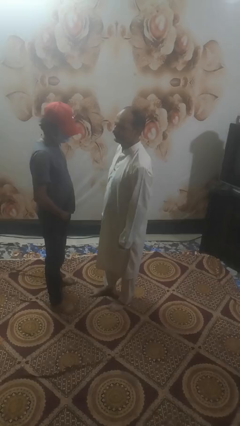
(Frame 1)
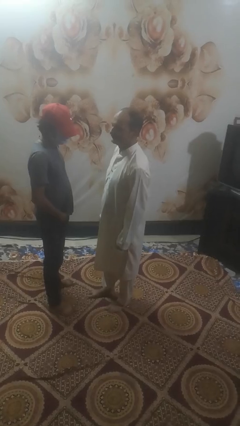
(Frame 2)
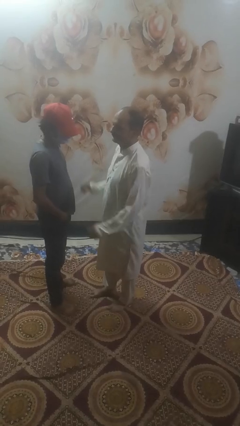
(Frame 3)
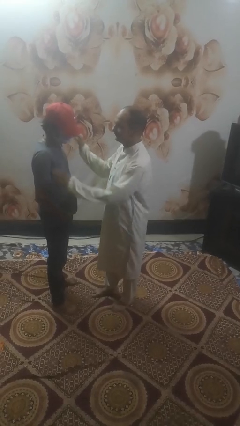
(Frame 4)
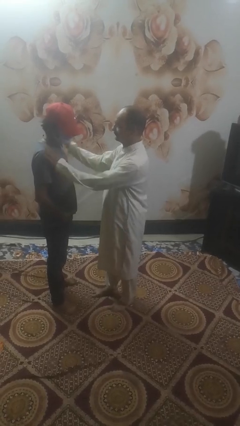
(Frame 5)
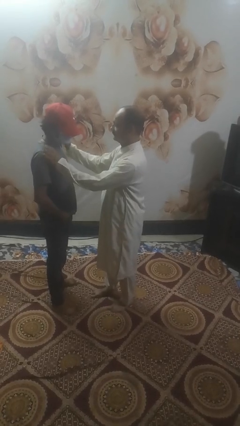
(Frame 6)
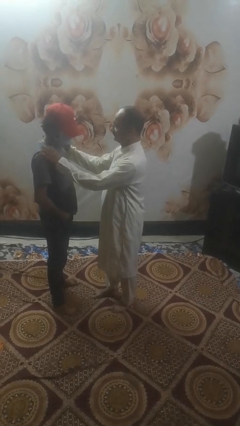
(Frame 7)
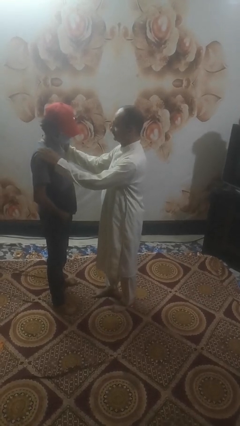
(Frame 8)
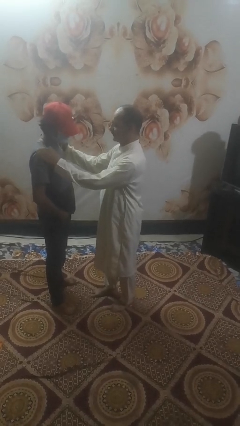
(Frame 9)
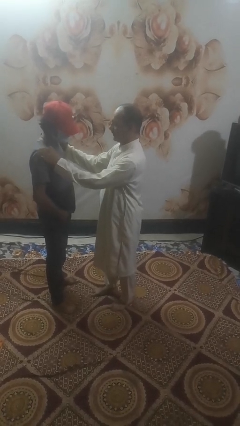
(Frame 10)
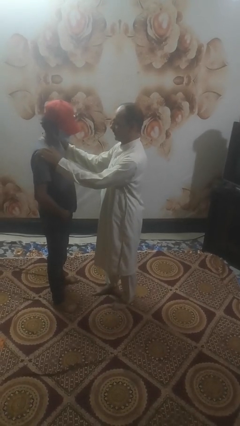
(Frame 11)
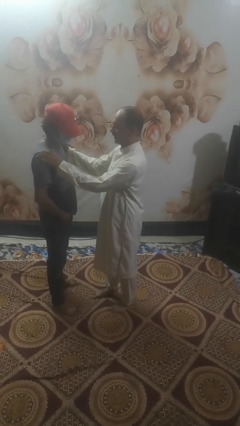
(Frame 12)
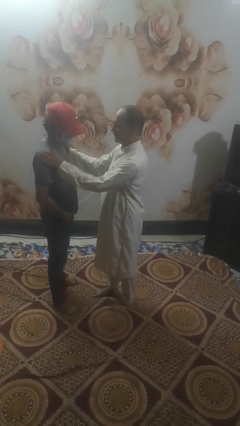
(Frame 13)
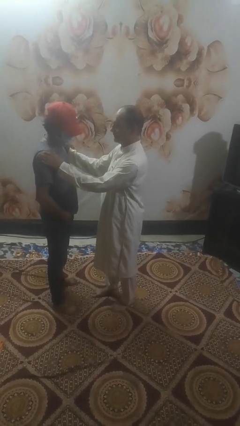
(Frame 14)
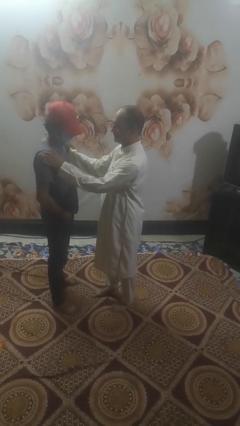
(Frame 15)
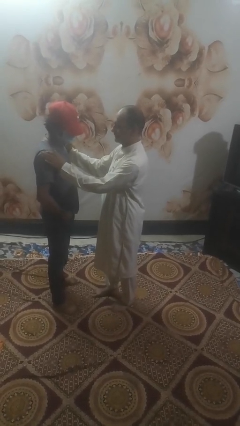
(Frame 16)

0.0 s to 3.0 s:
person pounds shoulders of person

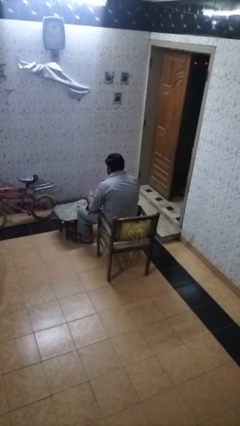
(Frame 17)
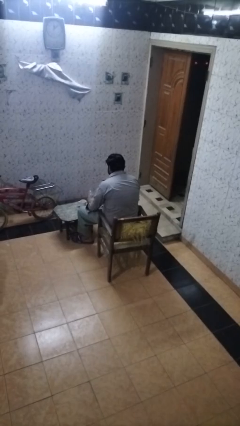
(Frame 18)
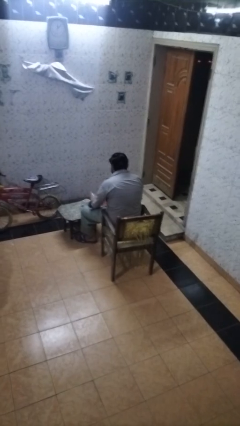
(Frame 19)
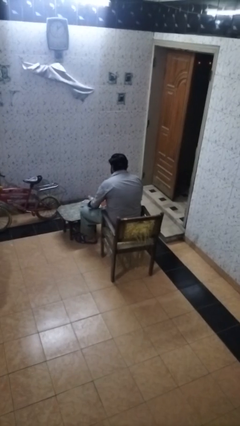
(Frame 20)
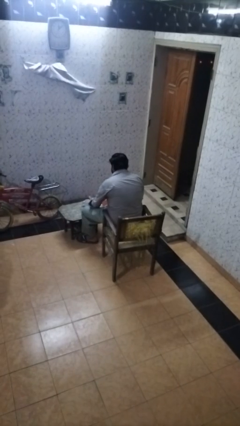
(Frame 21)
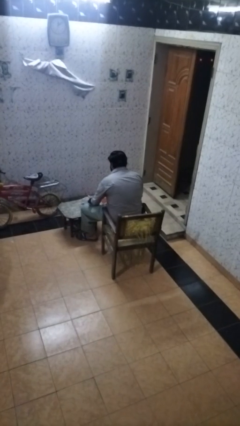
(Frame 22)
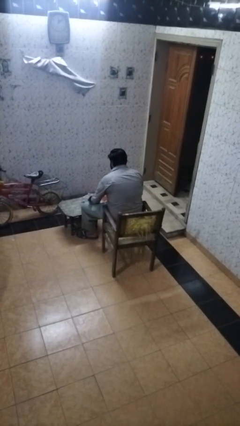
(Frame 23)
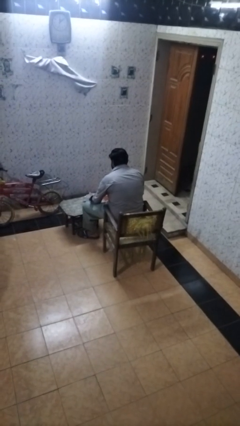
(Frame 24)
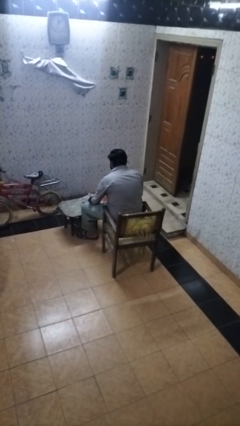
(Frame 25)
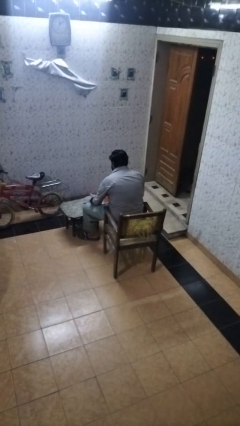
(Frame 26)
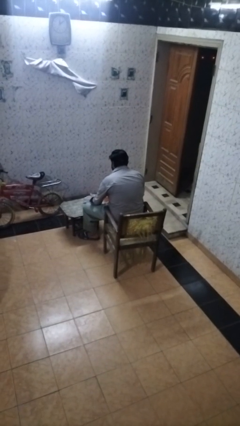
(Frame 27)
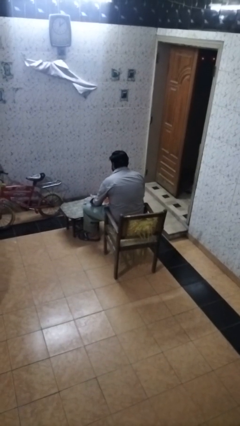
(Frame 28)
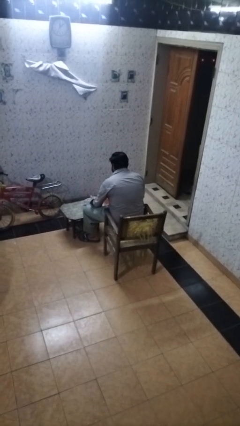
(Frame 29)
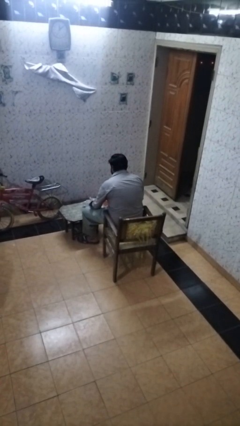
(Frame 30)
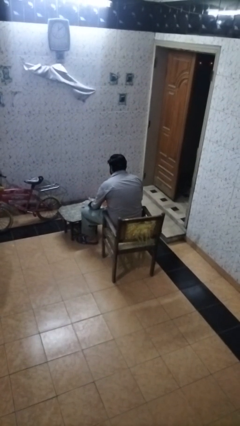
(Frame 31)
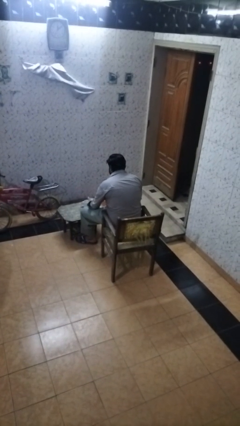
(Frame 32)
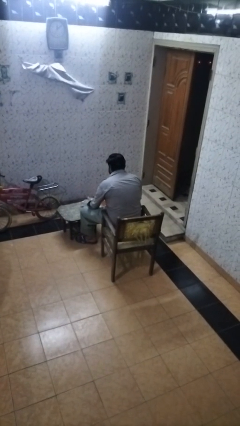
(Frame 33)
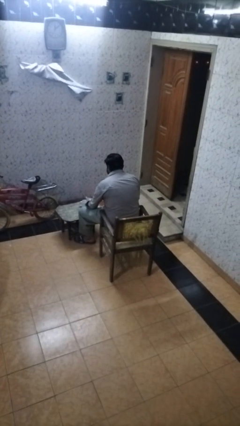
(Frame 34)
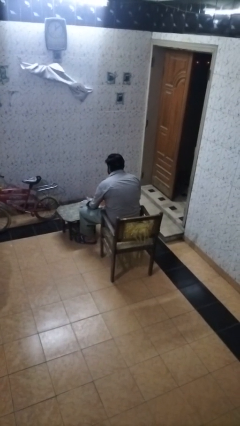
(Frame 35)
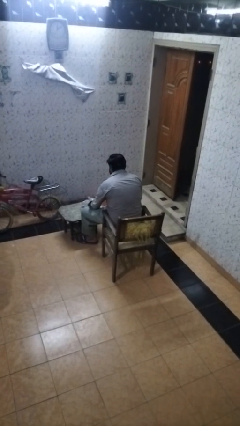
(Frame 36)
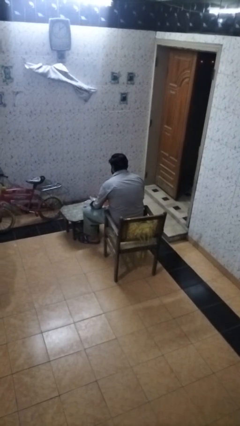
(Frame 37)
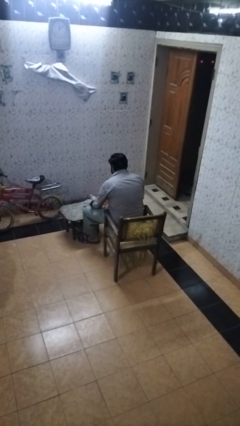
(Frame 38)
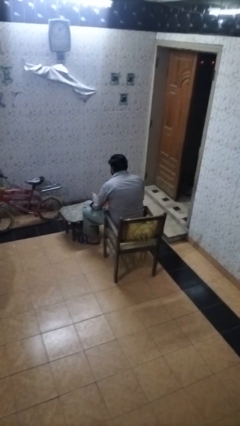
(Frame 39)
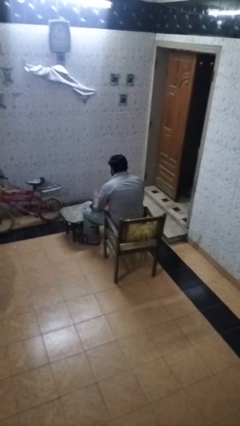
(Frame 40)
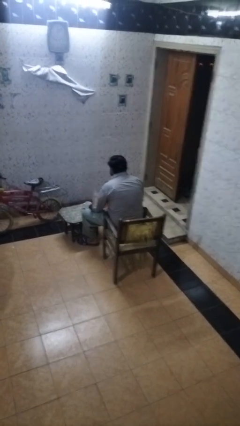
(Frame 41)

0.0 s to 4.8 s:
person pours liquid into cup

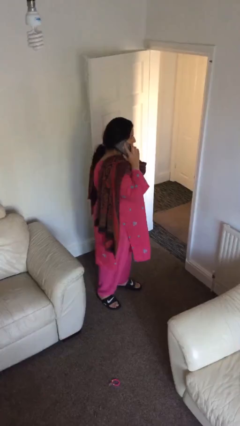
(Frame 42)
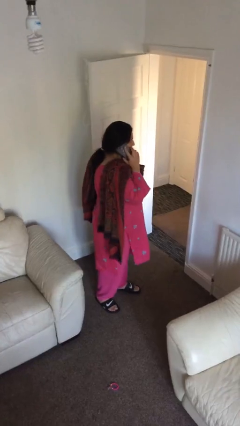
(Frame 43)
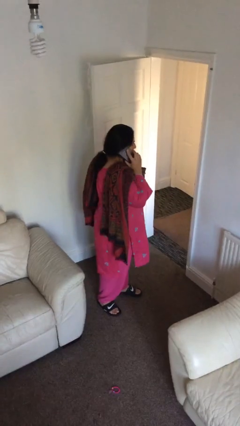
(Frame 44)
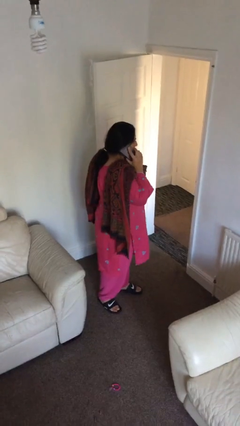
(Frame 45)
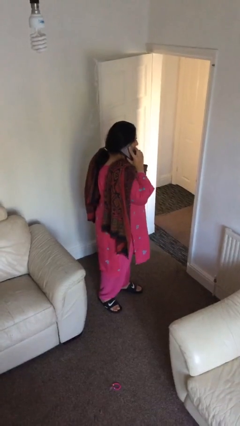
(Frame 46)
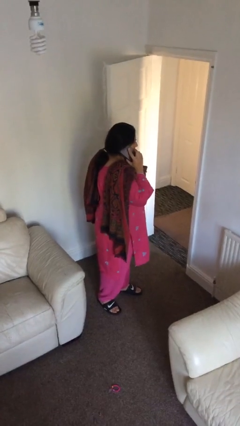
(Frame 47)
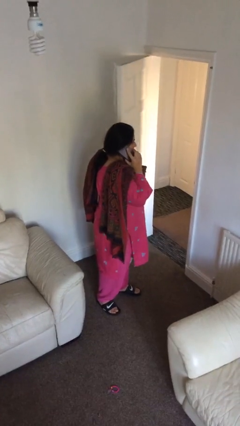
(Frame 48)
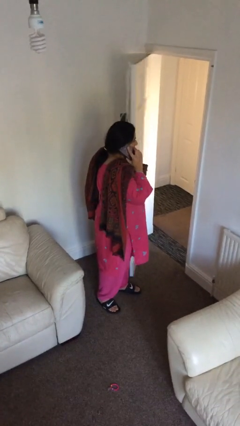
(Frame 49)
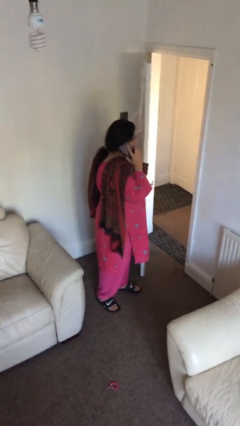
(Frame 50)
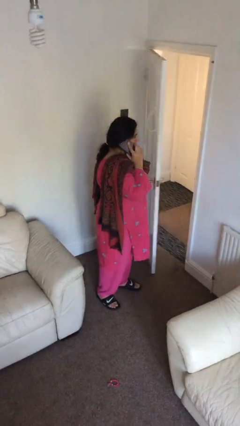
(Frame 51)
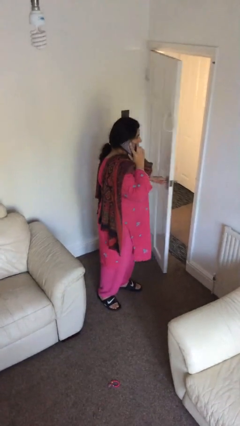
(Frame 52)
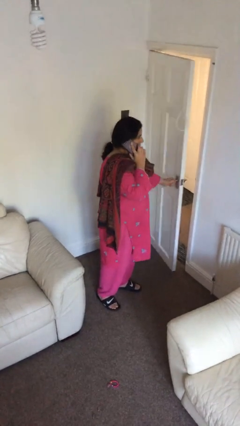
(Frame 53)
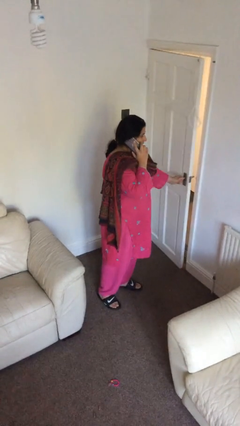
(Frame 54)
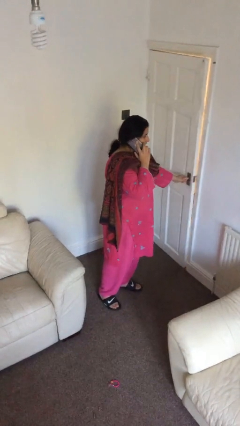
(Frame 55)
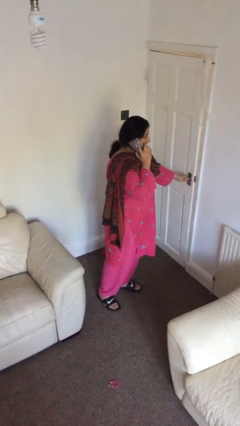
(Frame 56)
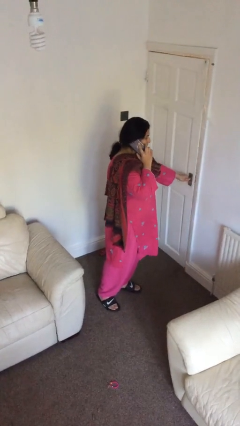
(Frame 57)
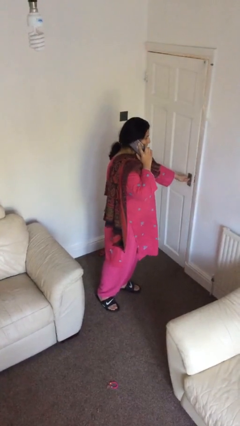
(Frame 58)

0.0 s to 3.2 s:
person closes facility door

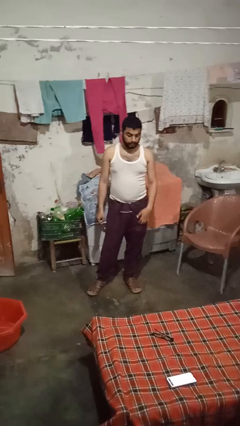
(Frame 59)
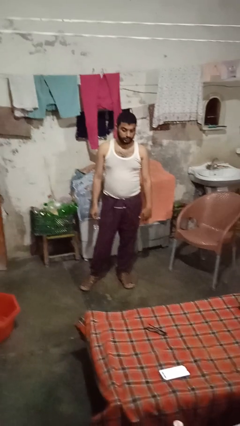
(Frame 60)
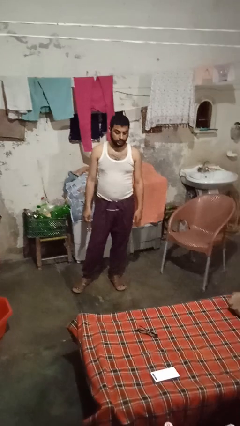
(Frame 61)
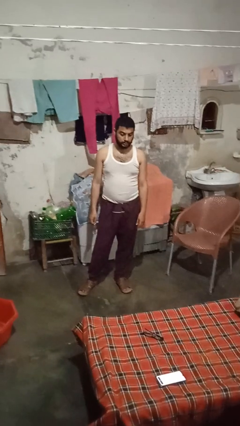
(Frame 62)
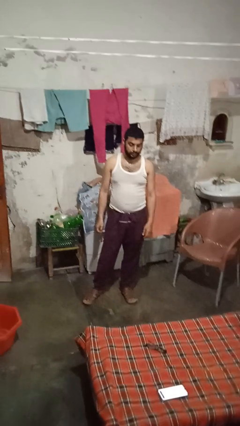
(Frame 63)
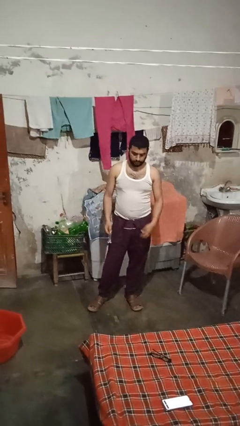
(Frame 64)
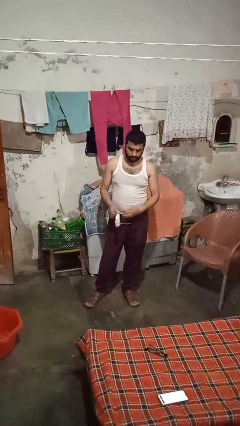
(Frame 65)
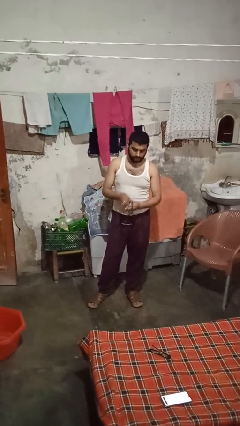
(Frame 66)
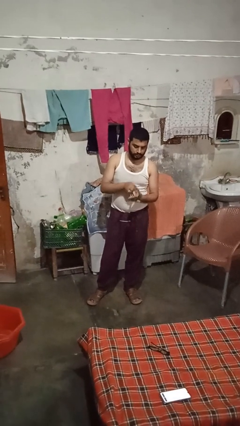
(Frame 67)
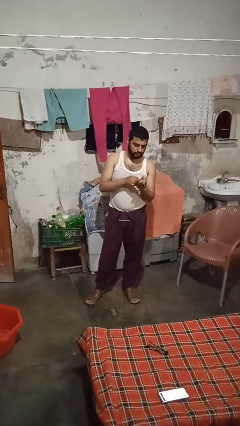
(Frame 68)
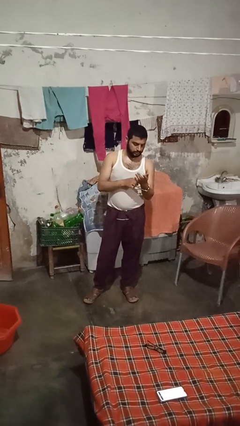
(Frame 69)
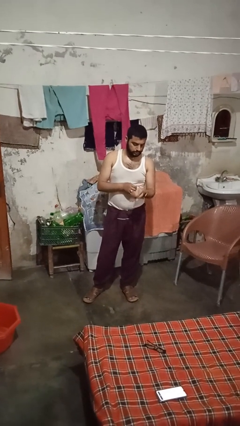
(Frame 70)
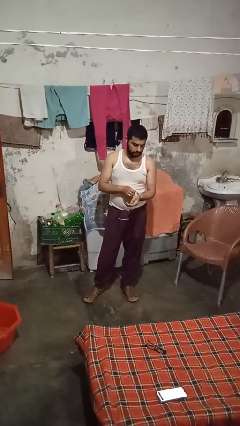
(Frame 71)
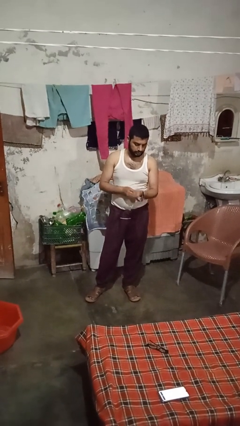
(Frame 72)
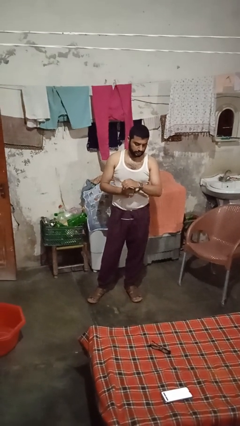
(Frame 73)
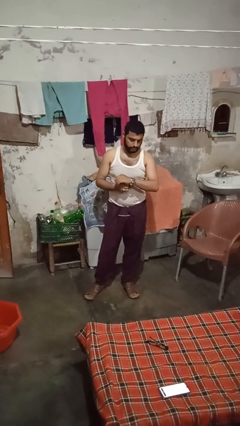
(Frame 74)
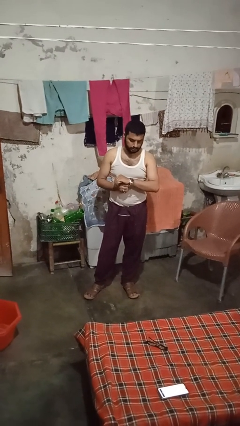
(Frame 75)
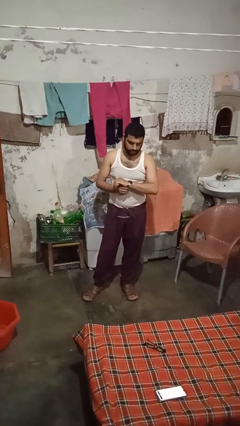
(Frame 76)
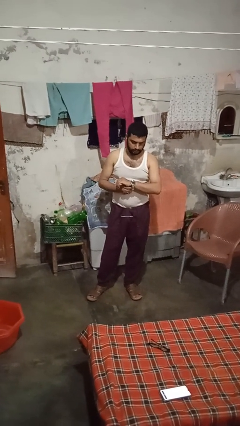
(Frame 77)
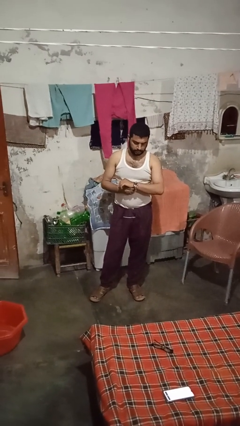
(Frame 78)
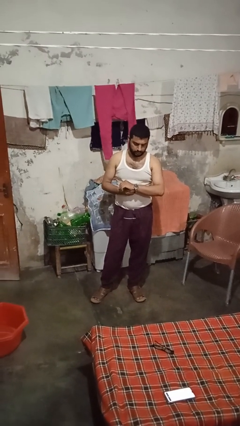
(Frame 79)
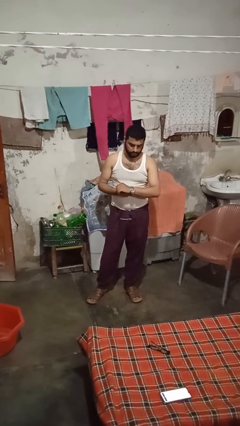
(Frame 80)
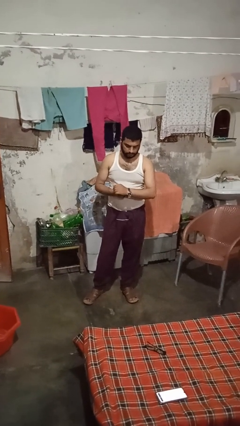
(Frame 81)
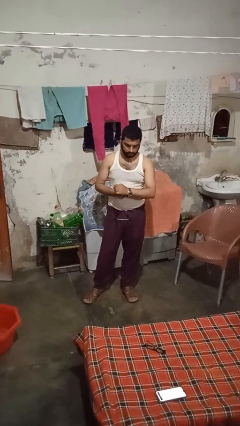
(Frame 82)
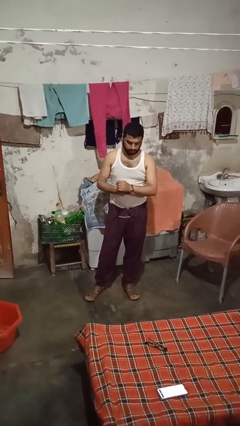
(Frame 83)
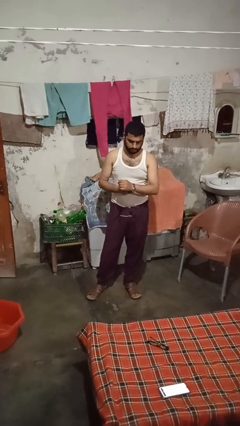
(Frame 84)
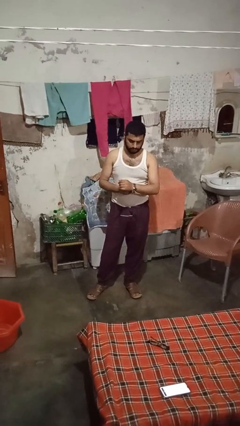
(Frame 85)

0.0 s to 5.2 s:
person puts on wristwatch

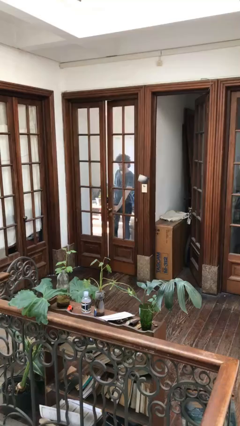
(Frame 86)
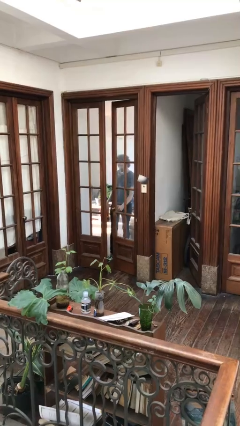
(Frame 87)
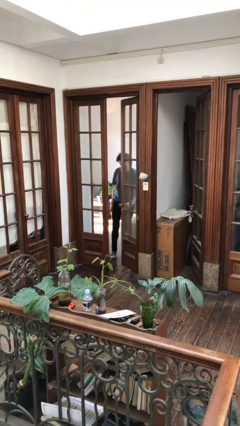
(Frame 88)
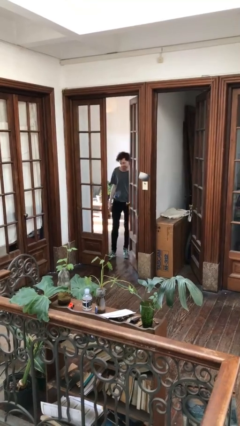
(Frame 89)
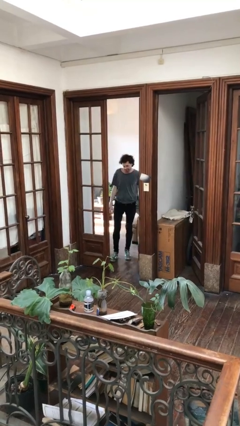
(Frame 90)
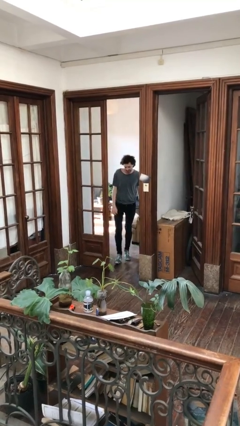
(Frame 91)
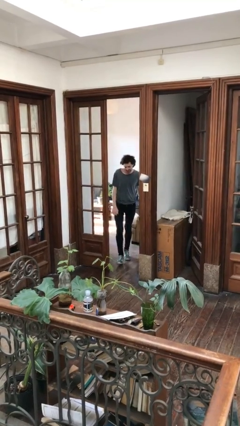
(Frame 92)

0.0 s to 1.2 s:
person opens facility door

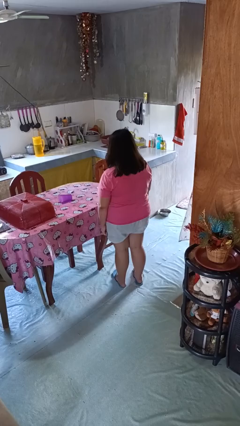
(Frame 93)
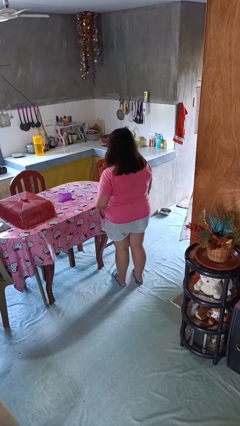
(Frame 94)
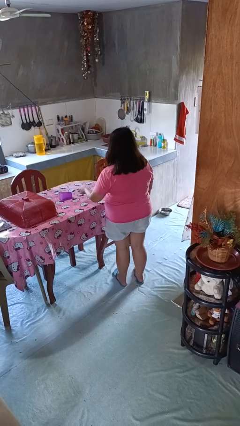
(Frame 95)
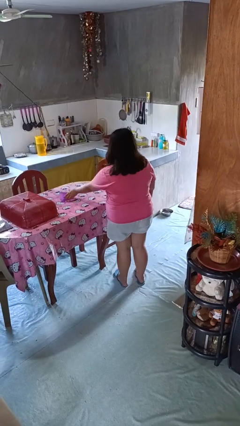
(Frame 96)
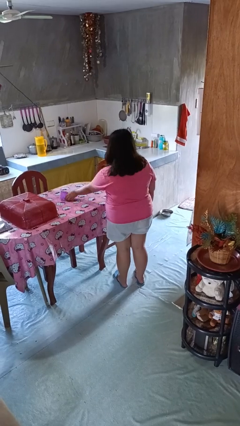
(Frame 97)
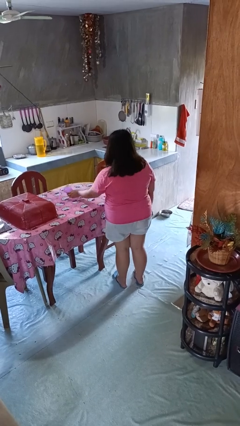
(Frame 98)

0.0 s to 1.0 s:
person sets upright glass
